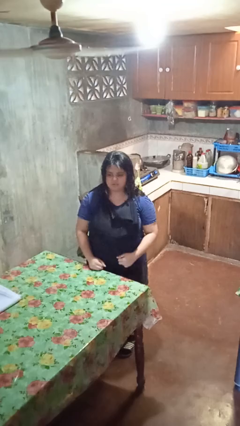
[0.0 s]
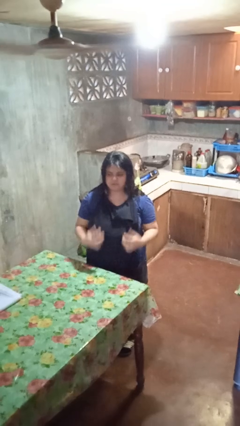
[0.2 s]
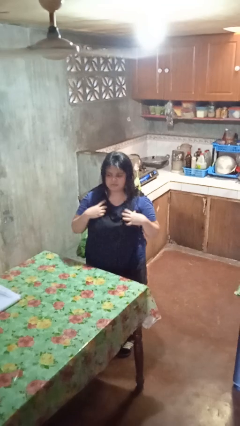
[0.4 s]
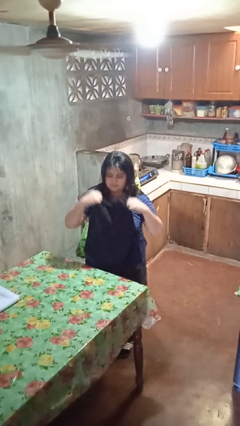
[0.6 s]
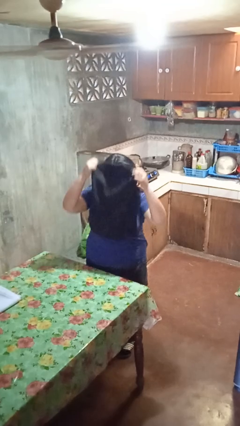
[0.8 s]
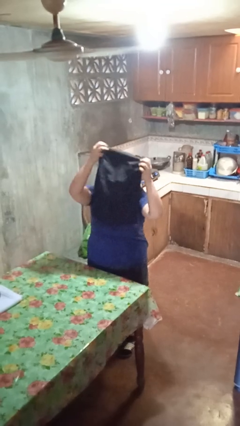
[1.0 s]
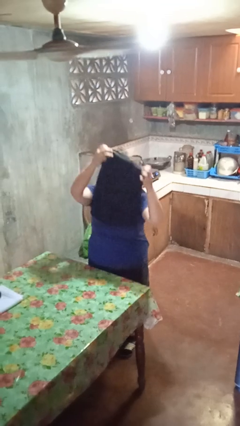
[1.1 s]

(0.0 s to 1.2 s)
person takes off apron

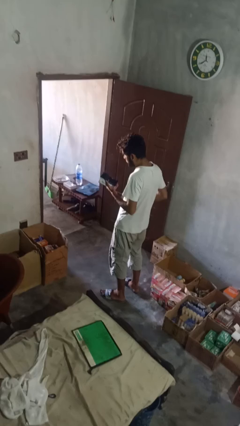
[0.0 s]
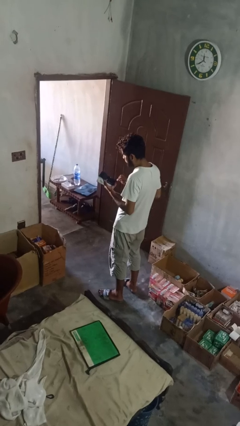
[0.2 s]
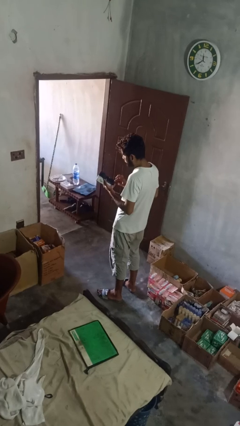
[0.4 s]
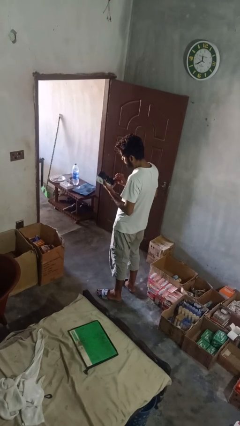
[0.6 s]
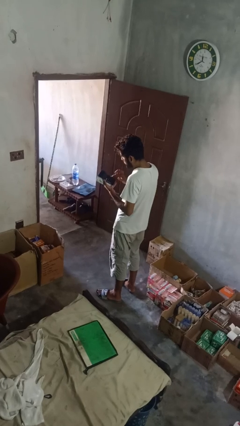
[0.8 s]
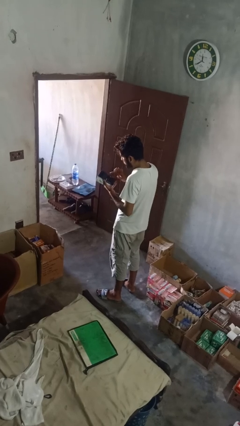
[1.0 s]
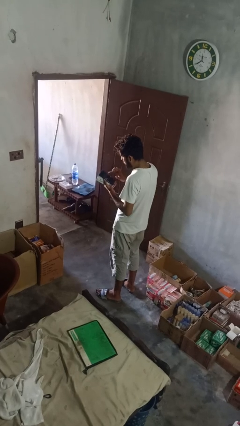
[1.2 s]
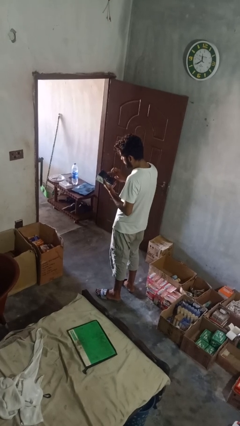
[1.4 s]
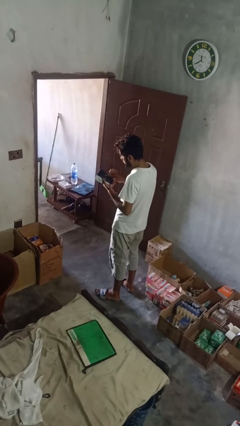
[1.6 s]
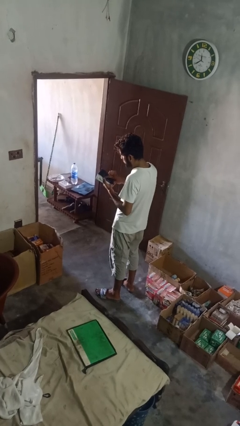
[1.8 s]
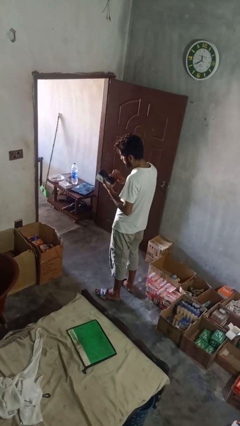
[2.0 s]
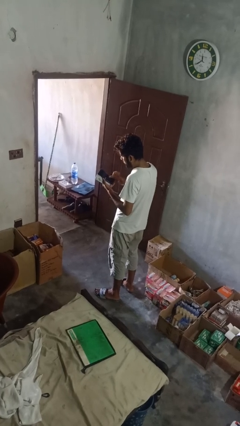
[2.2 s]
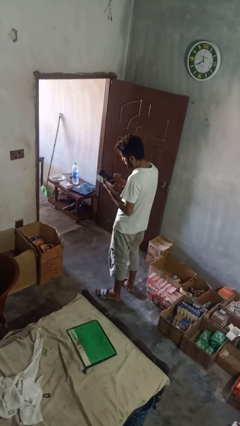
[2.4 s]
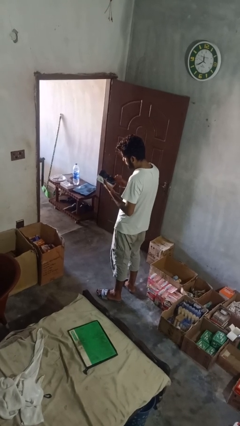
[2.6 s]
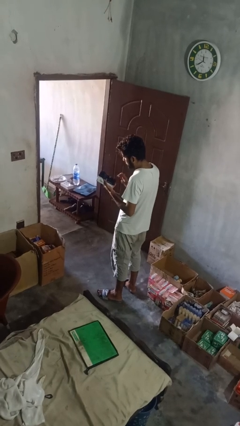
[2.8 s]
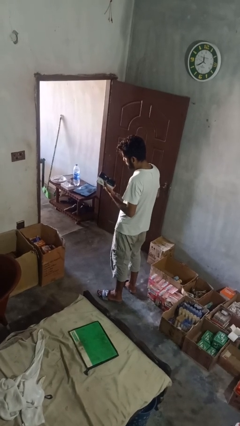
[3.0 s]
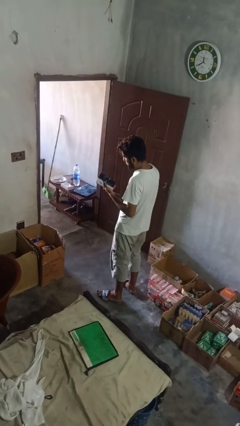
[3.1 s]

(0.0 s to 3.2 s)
person interacts with tablet

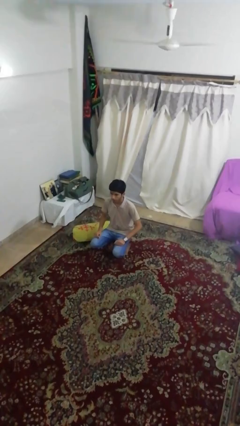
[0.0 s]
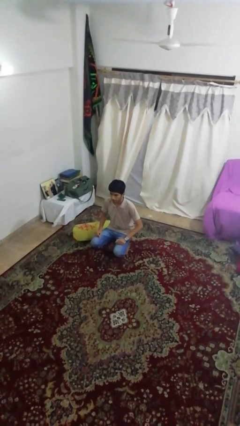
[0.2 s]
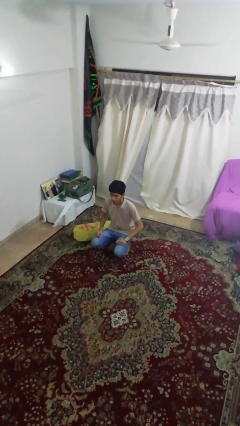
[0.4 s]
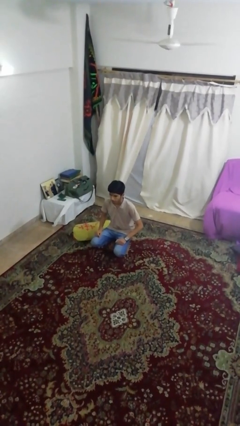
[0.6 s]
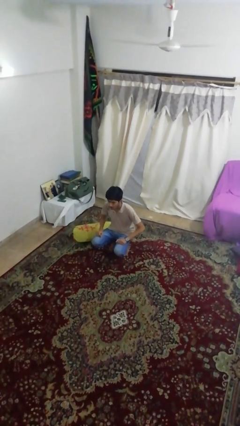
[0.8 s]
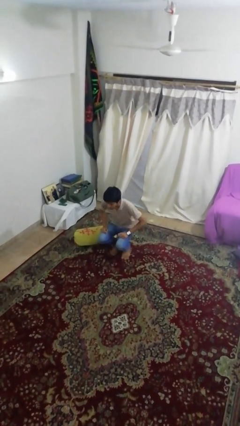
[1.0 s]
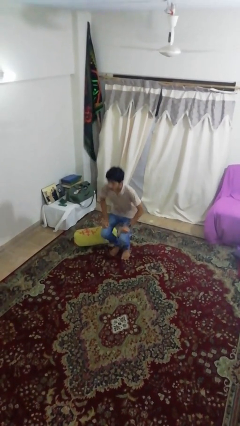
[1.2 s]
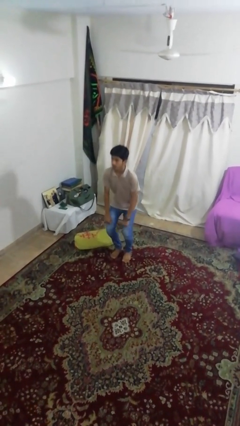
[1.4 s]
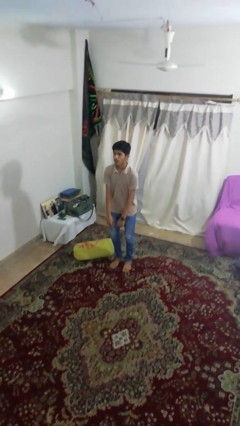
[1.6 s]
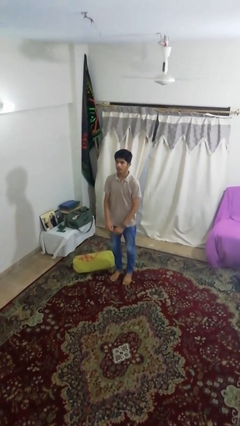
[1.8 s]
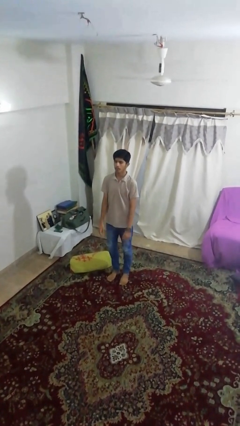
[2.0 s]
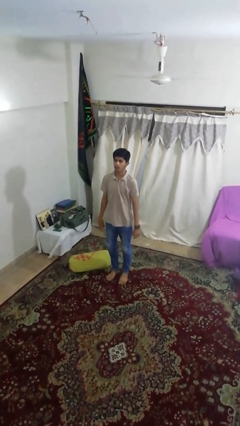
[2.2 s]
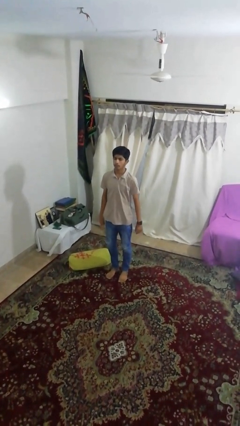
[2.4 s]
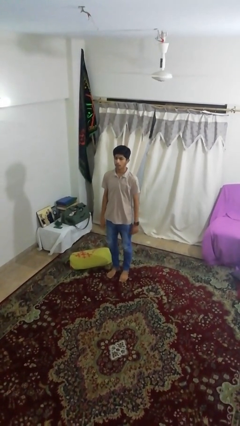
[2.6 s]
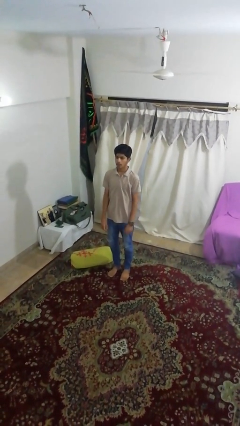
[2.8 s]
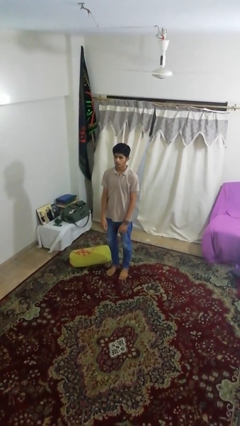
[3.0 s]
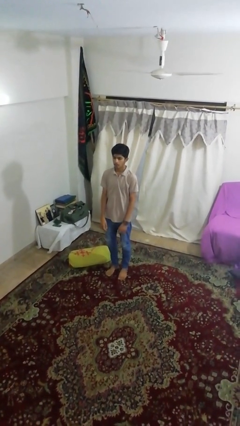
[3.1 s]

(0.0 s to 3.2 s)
person stands up

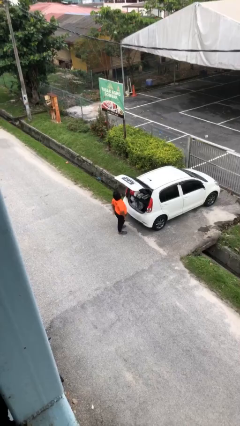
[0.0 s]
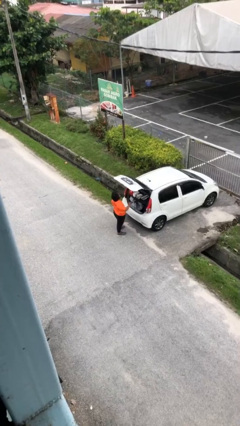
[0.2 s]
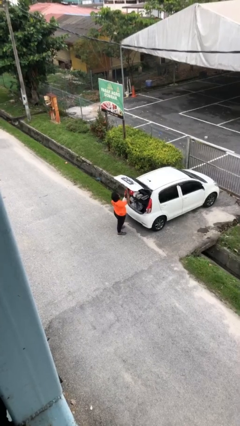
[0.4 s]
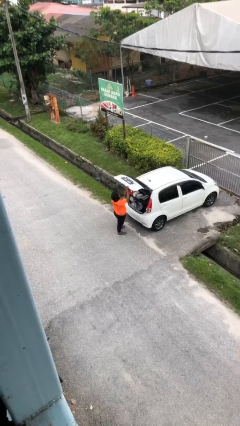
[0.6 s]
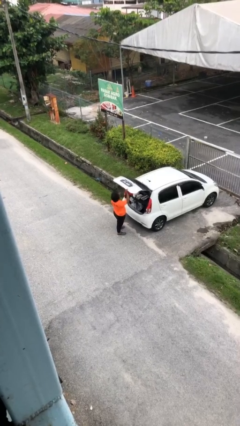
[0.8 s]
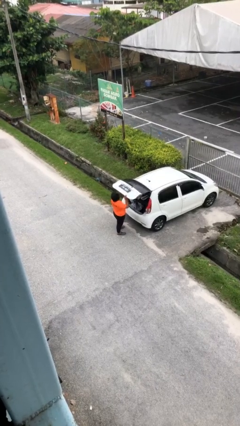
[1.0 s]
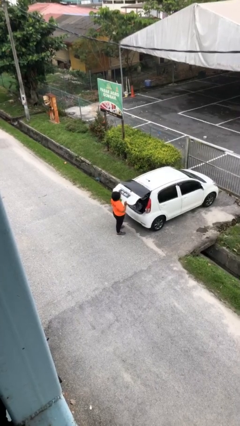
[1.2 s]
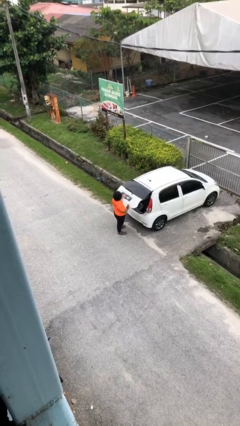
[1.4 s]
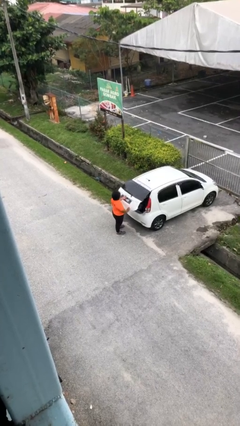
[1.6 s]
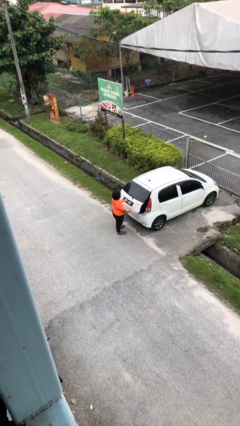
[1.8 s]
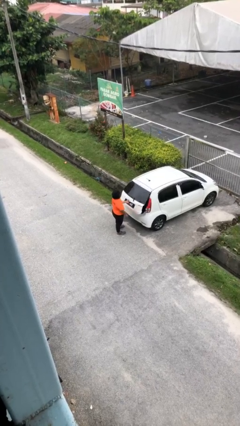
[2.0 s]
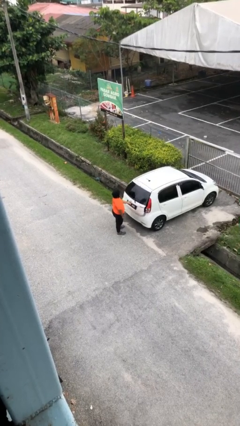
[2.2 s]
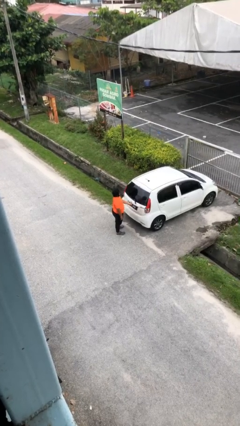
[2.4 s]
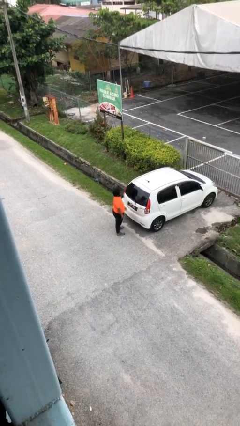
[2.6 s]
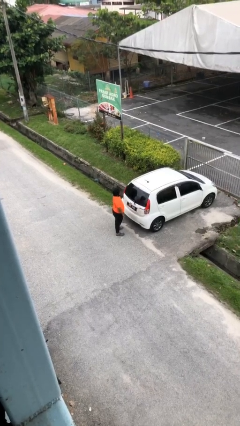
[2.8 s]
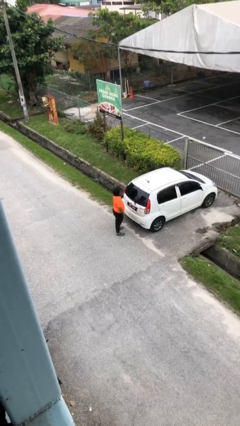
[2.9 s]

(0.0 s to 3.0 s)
person closes car trunk

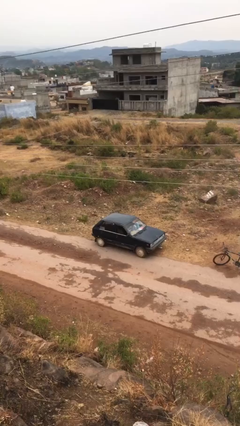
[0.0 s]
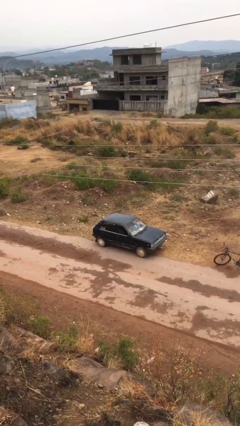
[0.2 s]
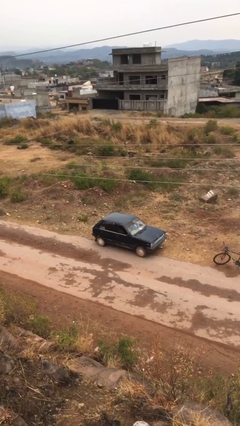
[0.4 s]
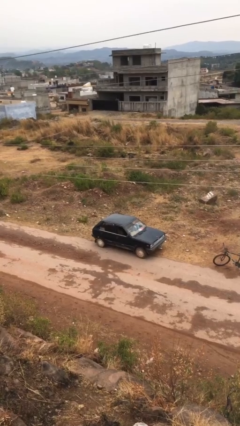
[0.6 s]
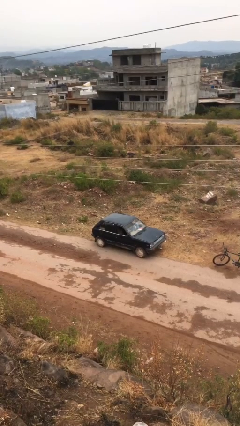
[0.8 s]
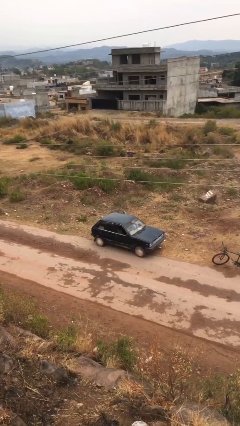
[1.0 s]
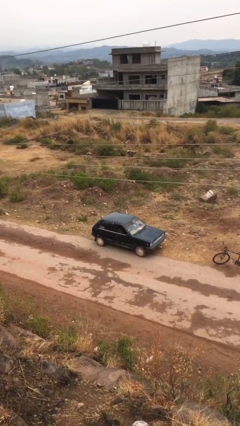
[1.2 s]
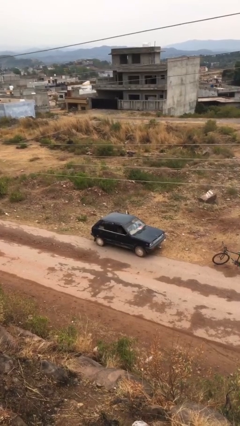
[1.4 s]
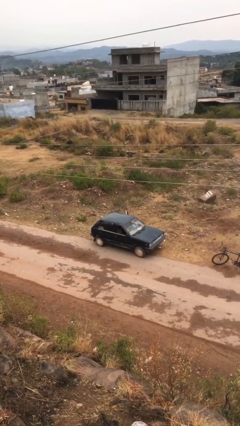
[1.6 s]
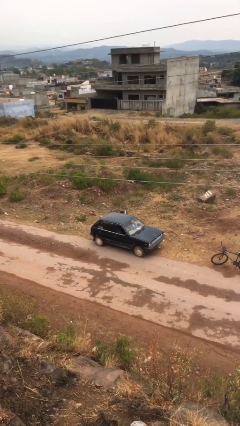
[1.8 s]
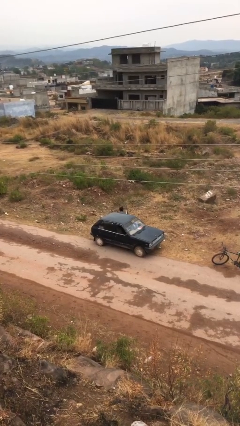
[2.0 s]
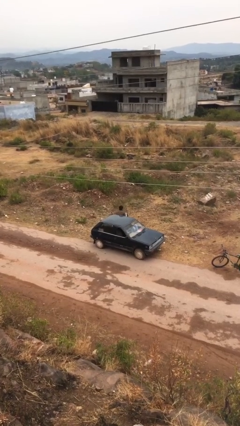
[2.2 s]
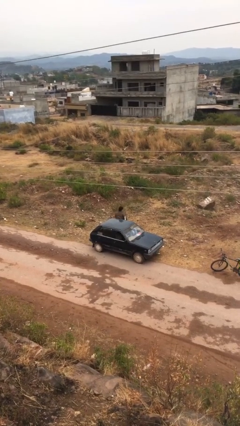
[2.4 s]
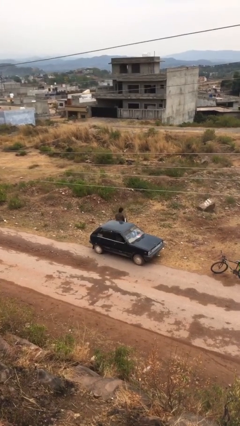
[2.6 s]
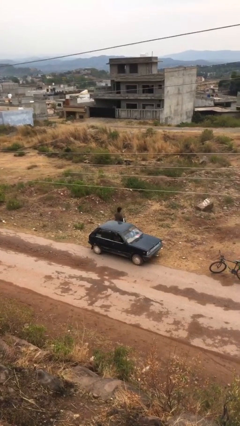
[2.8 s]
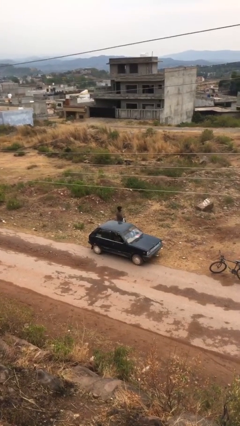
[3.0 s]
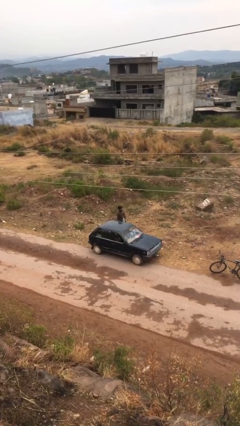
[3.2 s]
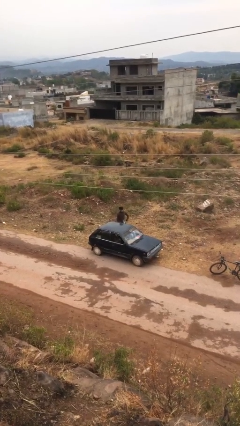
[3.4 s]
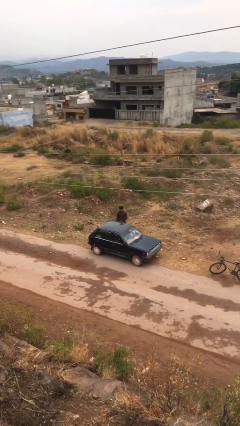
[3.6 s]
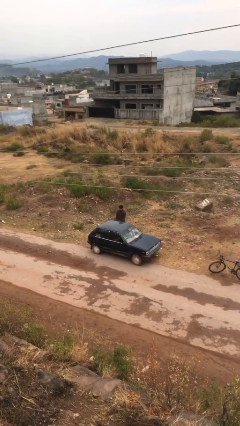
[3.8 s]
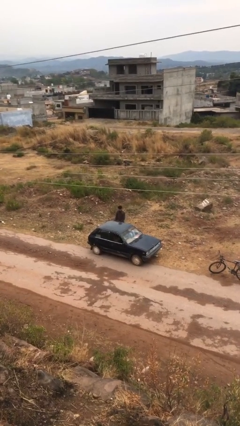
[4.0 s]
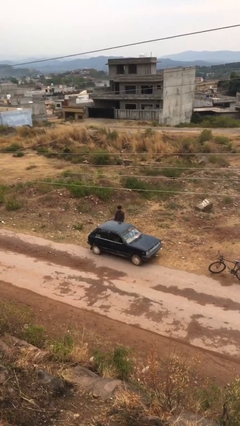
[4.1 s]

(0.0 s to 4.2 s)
car drops off person

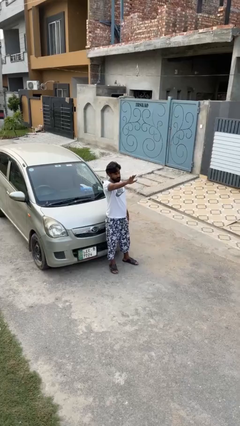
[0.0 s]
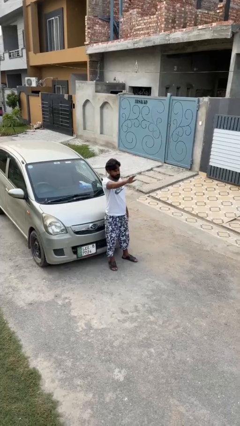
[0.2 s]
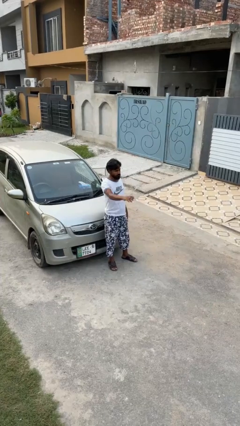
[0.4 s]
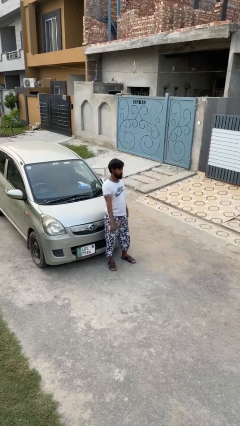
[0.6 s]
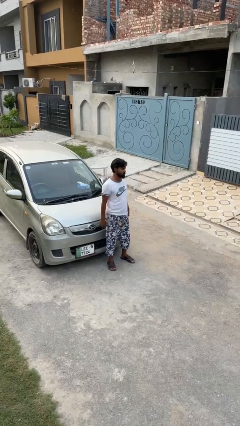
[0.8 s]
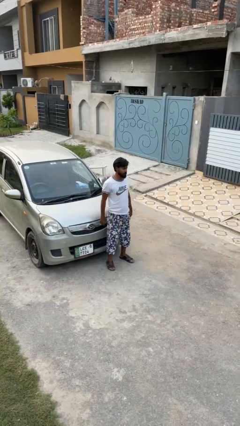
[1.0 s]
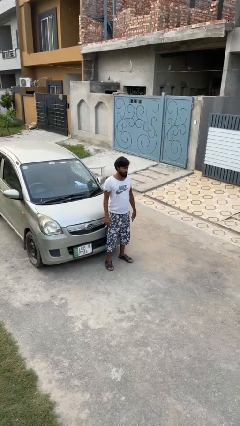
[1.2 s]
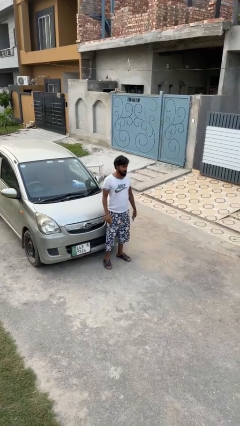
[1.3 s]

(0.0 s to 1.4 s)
person gestures lower hand

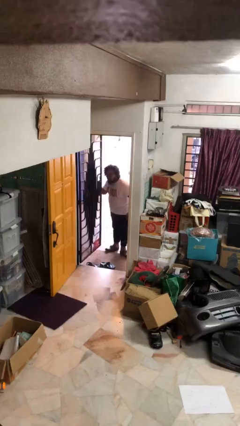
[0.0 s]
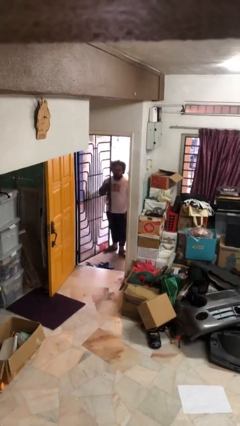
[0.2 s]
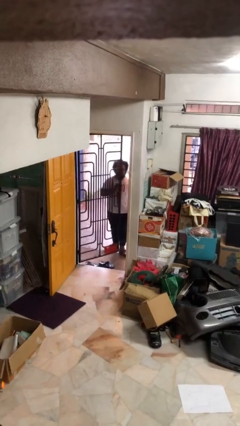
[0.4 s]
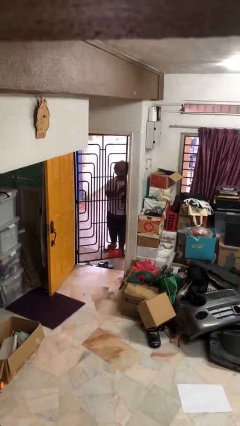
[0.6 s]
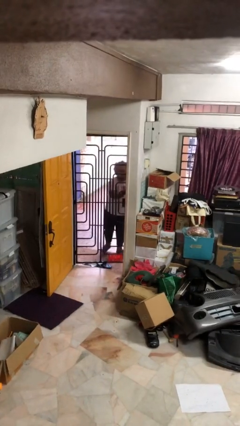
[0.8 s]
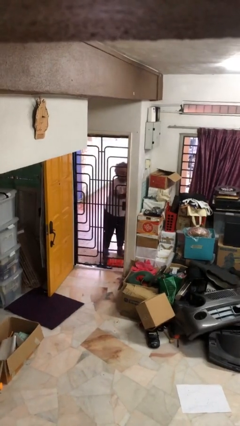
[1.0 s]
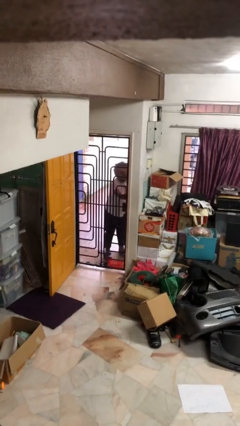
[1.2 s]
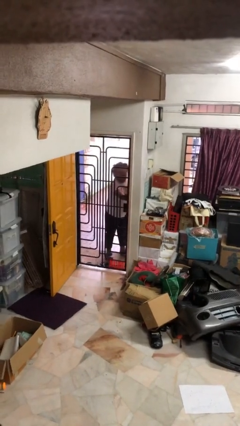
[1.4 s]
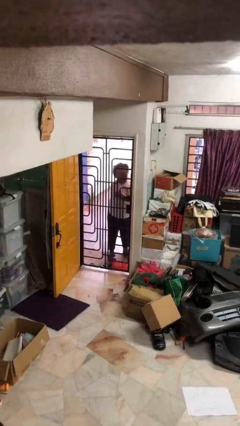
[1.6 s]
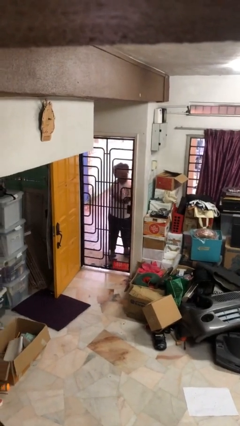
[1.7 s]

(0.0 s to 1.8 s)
person closes facility door
